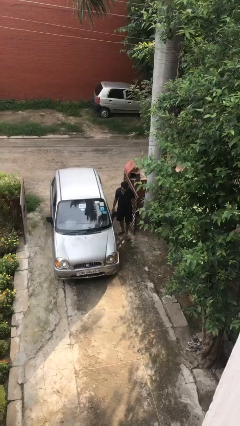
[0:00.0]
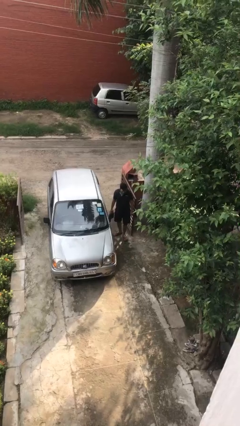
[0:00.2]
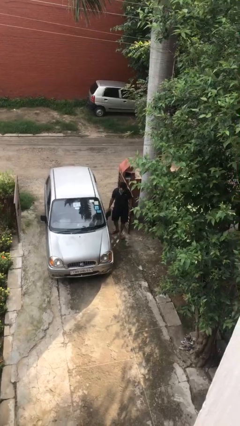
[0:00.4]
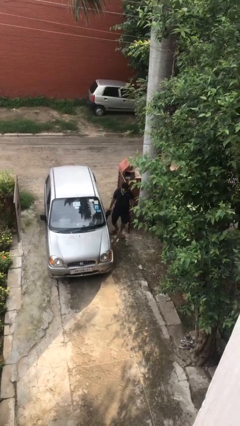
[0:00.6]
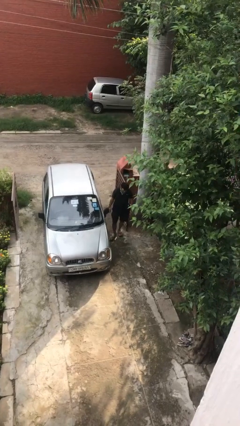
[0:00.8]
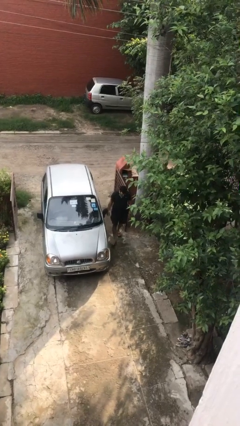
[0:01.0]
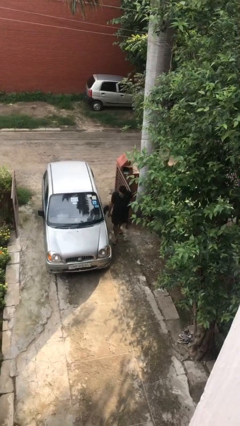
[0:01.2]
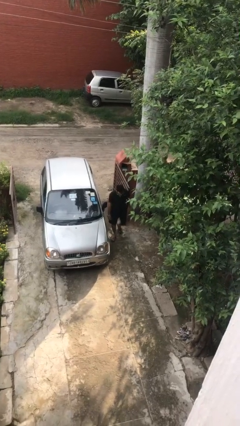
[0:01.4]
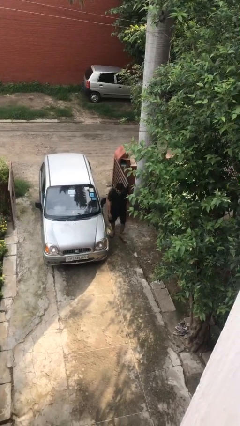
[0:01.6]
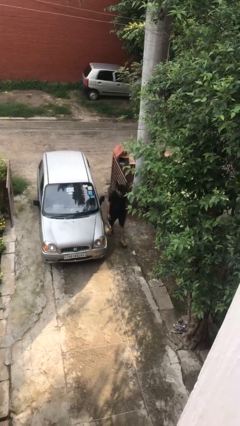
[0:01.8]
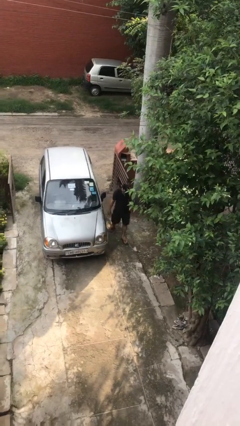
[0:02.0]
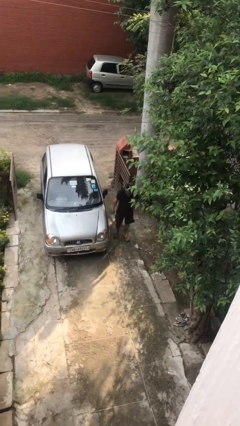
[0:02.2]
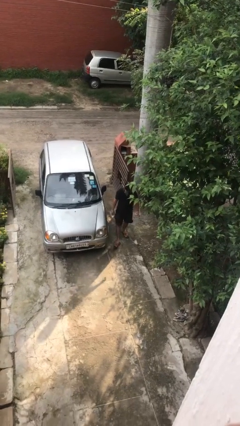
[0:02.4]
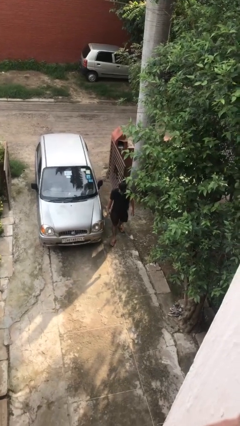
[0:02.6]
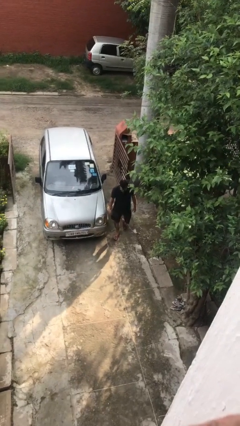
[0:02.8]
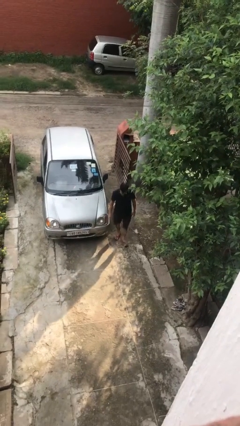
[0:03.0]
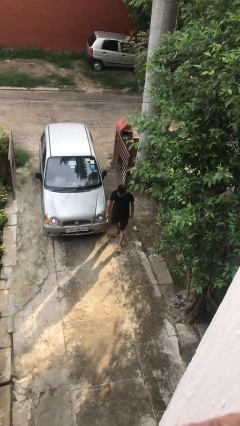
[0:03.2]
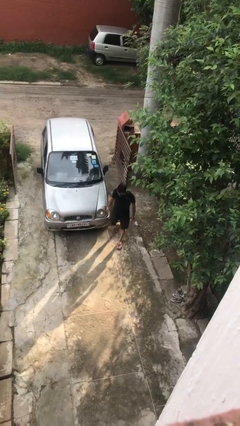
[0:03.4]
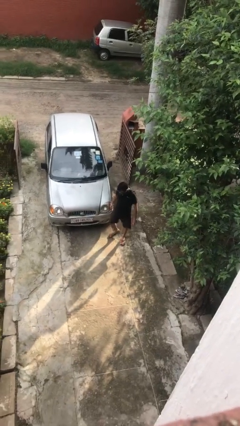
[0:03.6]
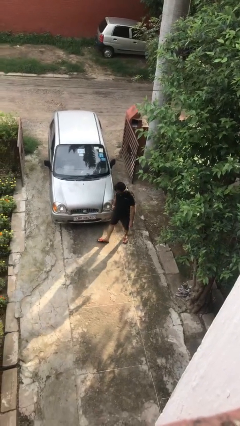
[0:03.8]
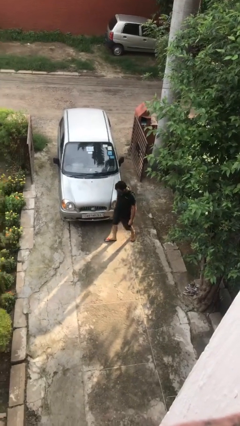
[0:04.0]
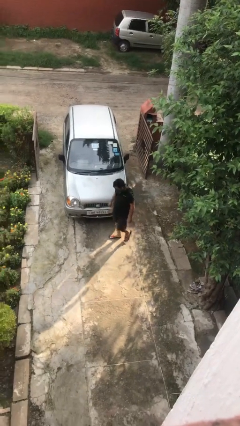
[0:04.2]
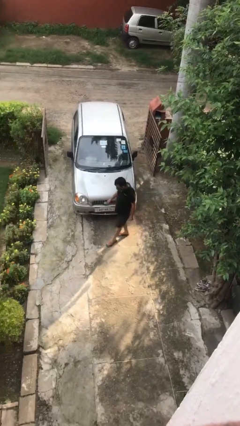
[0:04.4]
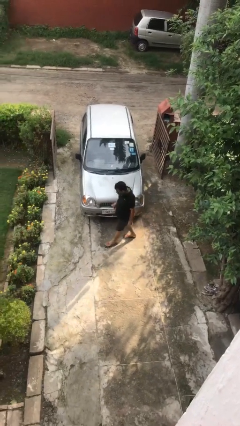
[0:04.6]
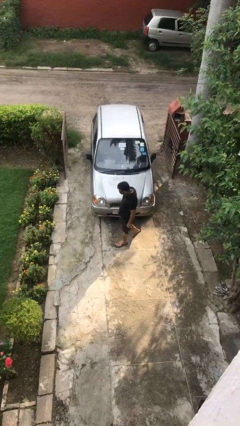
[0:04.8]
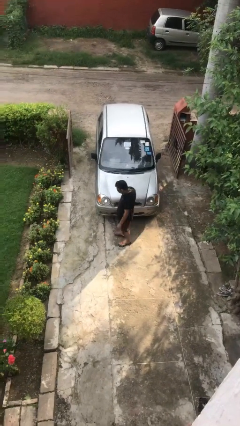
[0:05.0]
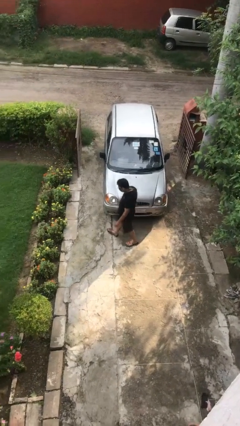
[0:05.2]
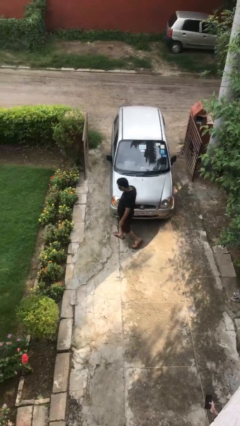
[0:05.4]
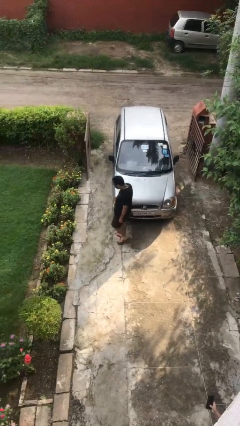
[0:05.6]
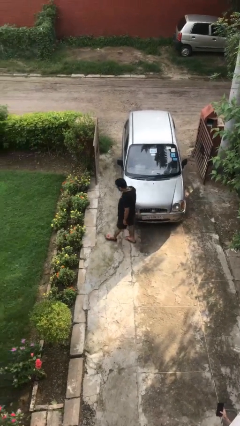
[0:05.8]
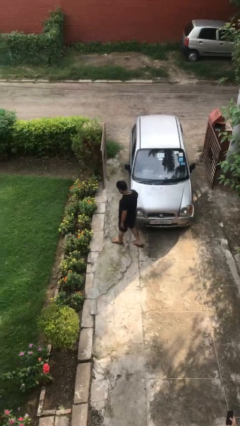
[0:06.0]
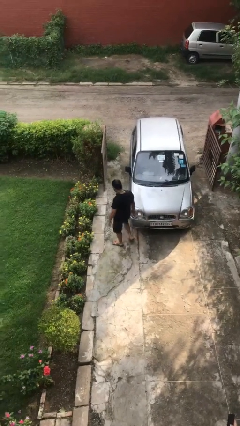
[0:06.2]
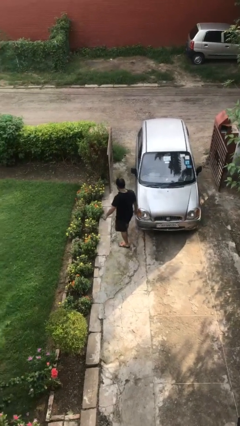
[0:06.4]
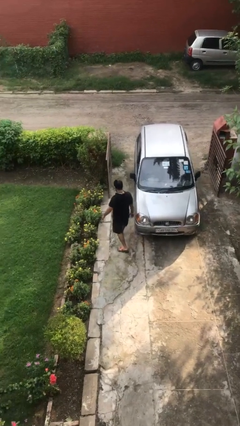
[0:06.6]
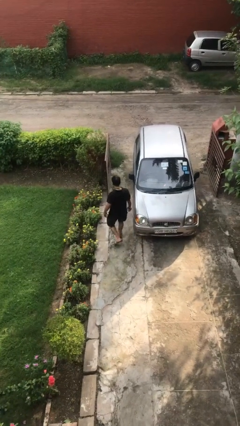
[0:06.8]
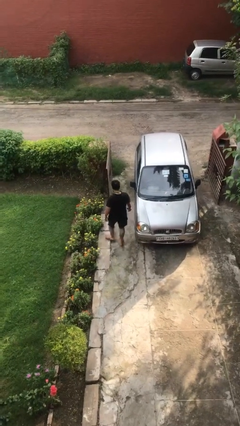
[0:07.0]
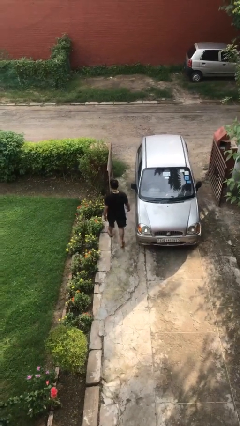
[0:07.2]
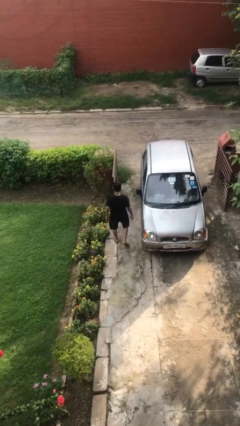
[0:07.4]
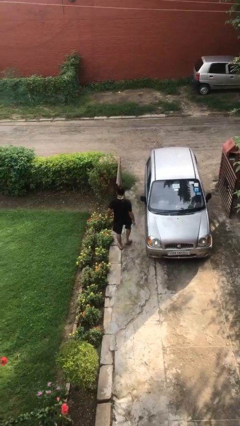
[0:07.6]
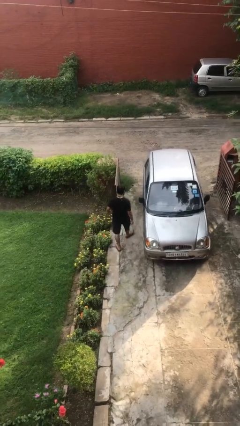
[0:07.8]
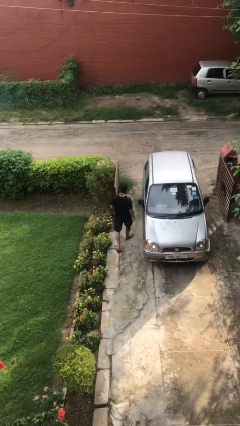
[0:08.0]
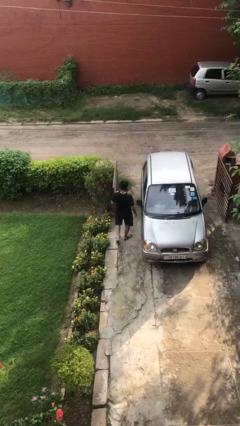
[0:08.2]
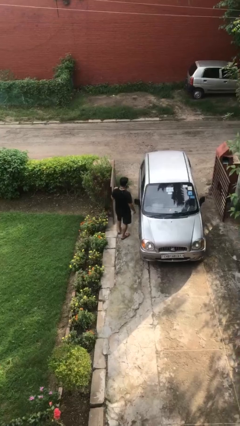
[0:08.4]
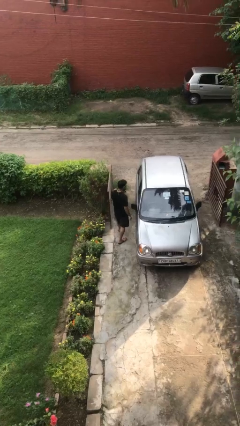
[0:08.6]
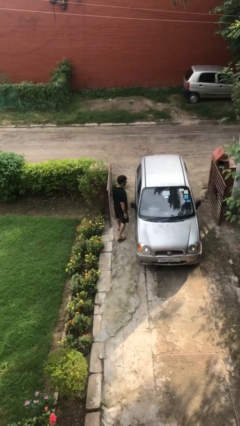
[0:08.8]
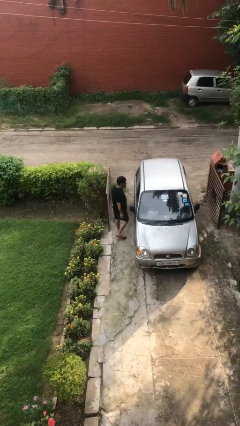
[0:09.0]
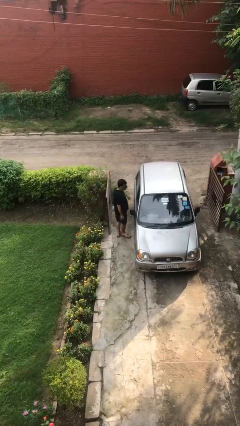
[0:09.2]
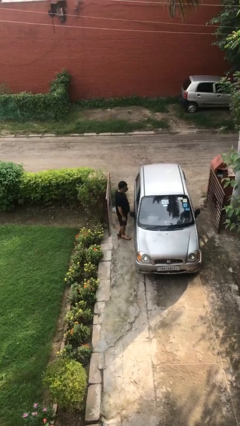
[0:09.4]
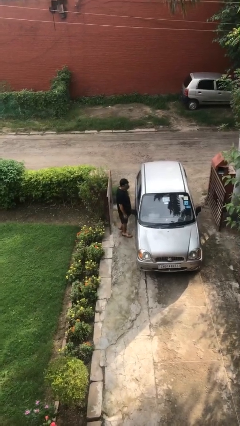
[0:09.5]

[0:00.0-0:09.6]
person walks around car

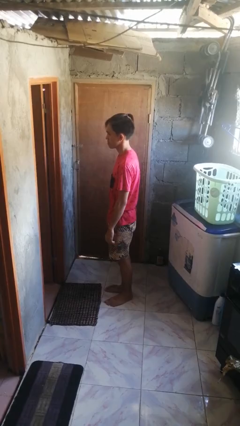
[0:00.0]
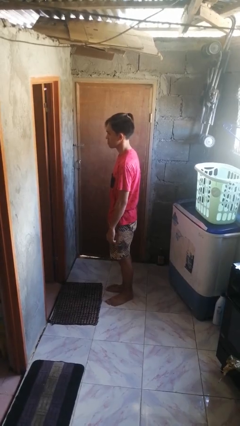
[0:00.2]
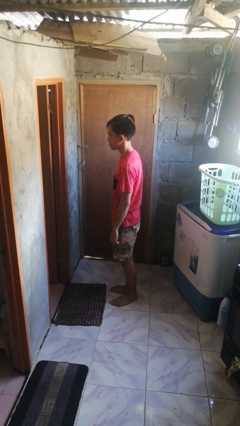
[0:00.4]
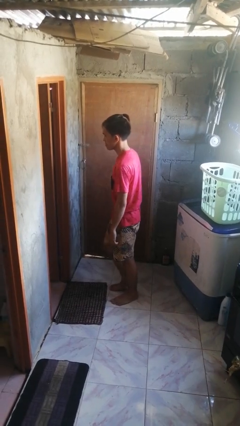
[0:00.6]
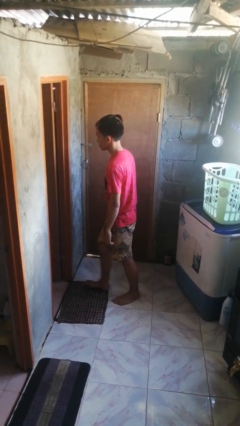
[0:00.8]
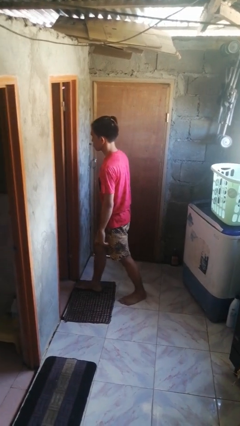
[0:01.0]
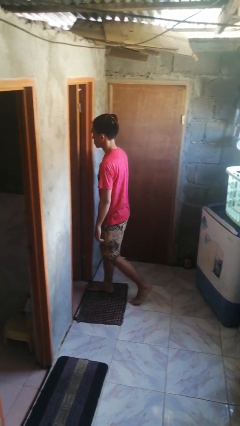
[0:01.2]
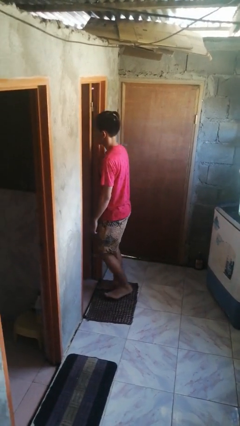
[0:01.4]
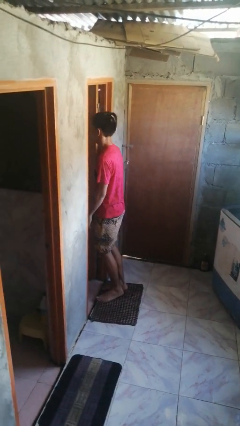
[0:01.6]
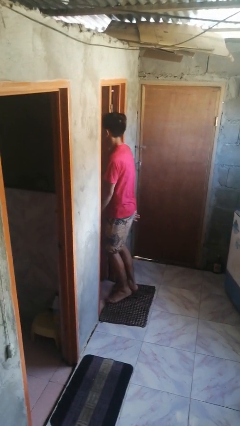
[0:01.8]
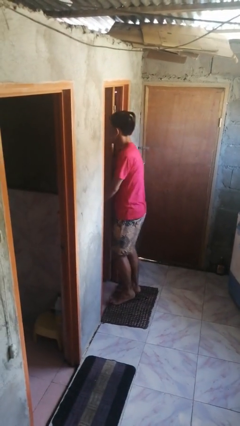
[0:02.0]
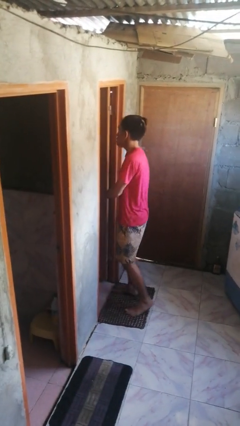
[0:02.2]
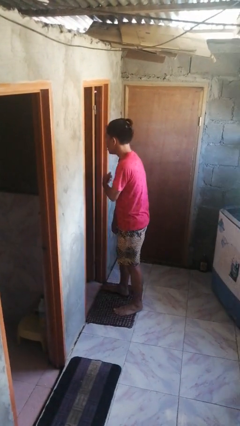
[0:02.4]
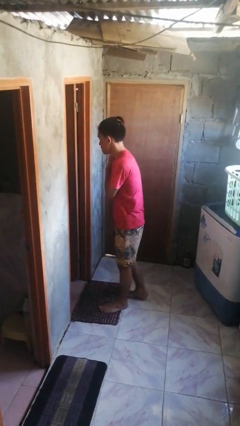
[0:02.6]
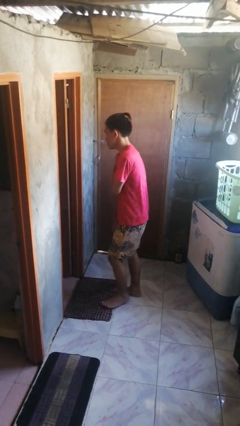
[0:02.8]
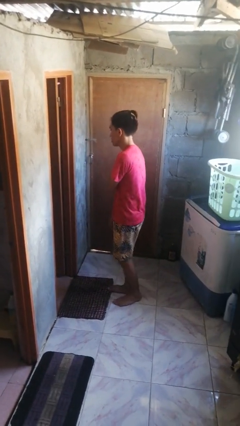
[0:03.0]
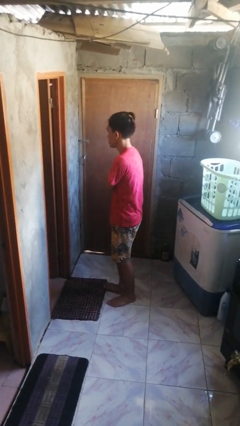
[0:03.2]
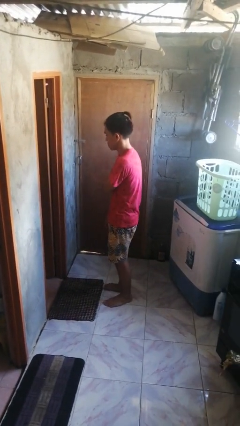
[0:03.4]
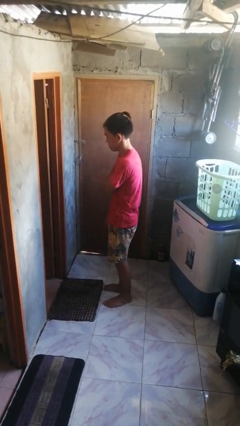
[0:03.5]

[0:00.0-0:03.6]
person bumps into wall

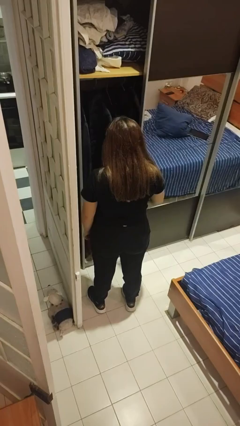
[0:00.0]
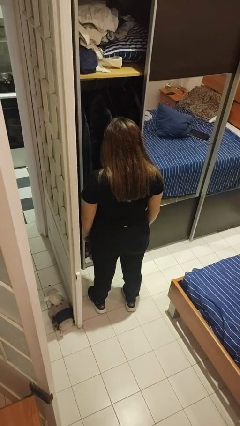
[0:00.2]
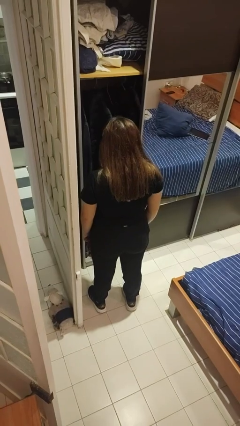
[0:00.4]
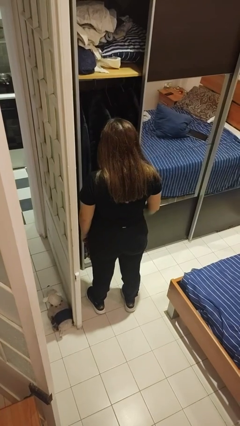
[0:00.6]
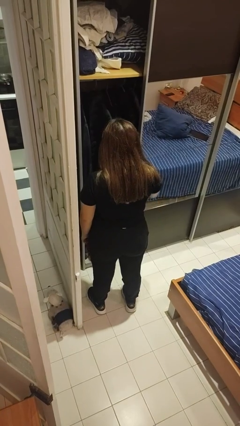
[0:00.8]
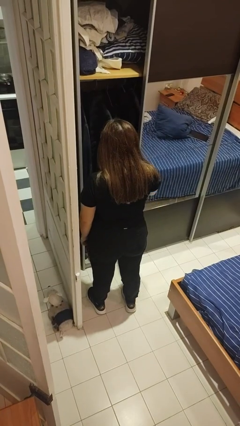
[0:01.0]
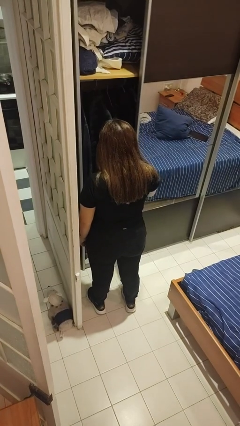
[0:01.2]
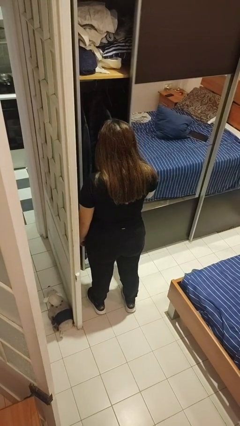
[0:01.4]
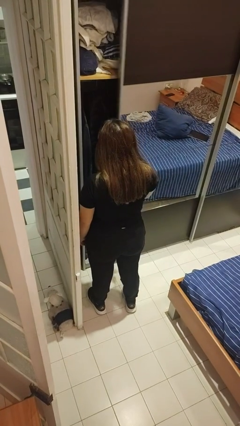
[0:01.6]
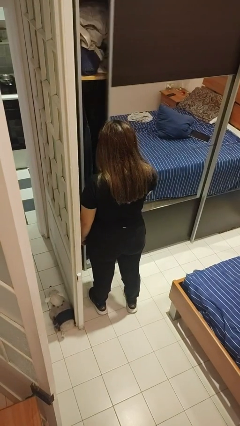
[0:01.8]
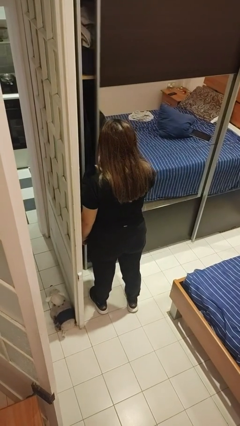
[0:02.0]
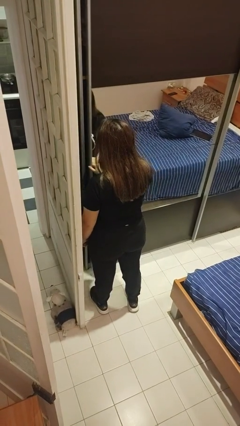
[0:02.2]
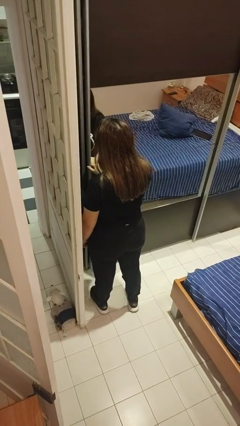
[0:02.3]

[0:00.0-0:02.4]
person closes dresser drawer

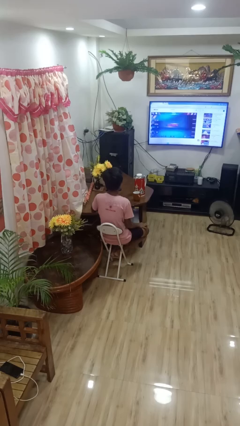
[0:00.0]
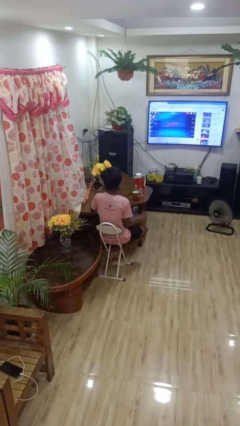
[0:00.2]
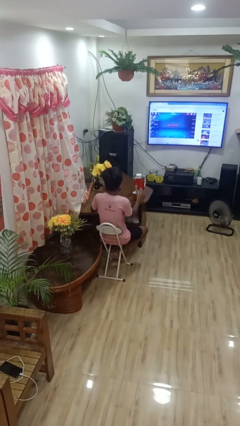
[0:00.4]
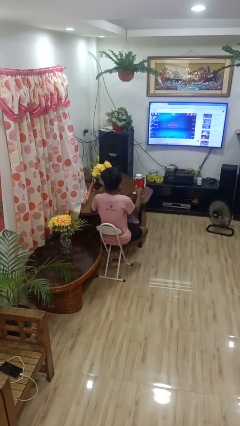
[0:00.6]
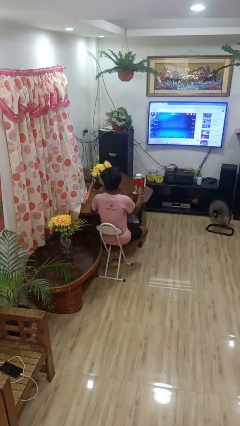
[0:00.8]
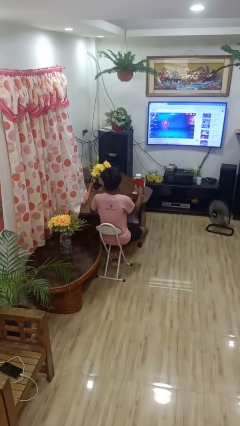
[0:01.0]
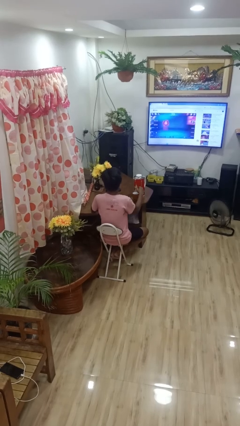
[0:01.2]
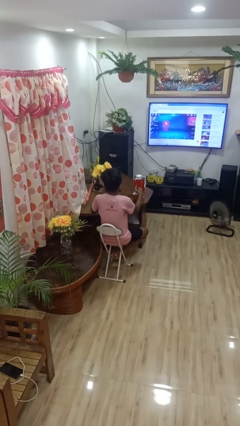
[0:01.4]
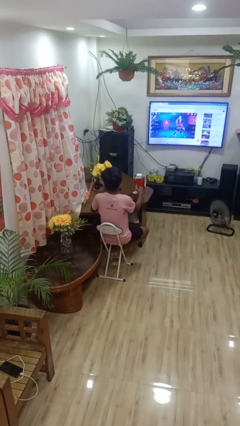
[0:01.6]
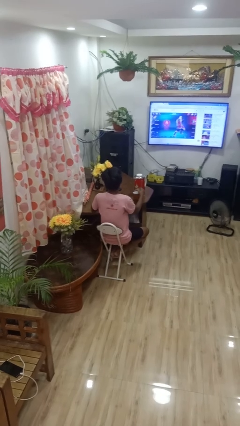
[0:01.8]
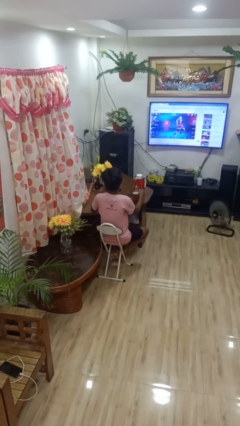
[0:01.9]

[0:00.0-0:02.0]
person stirs mug

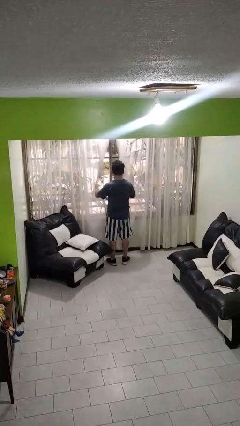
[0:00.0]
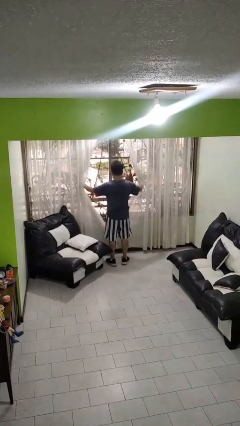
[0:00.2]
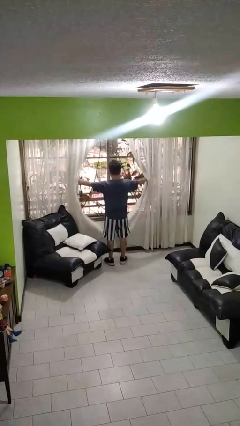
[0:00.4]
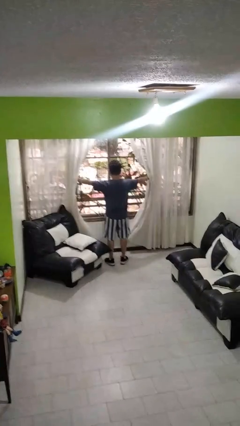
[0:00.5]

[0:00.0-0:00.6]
person opens curtains
